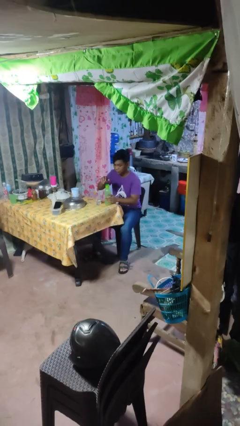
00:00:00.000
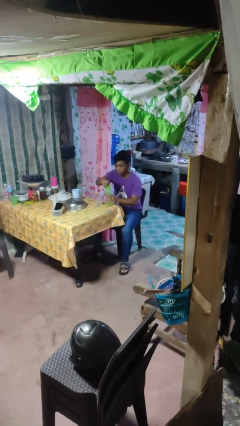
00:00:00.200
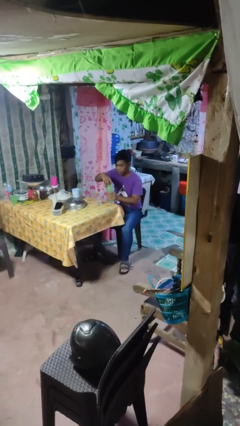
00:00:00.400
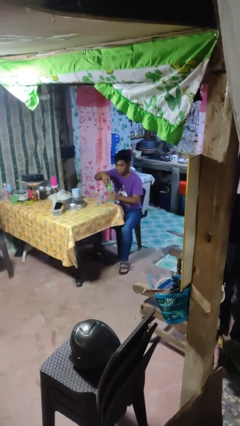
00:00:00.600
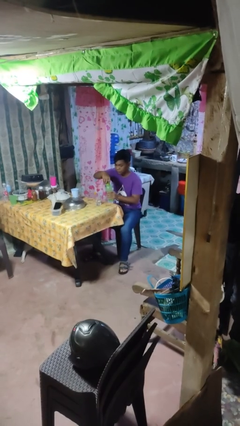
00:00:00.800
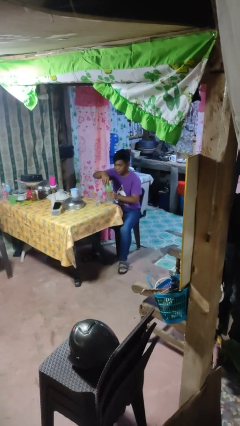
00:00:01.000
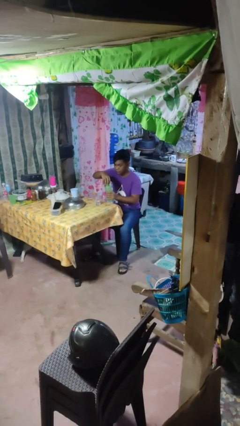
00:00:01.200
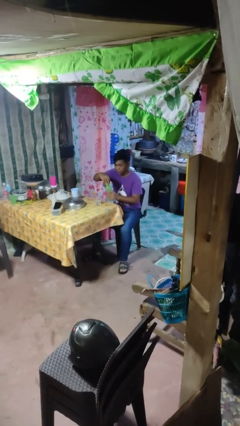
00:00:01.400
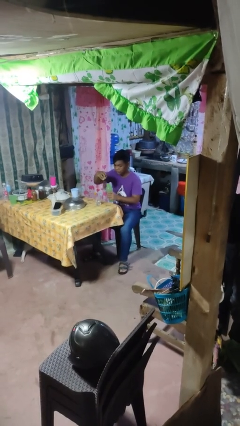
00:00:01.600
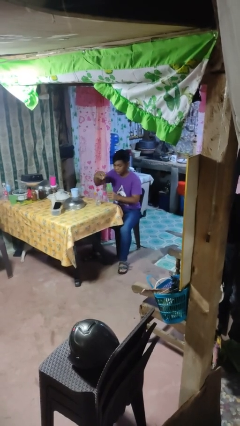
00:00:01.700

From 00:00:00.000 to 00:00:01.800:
person unscrews lid from bottle

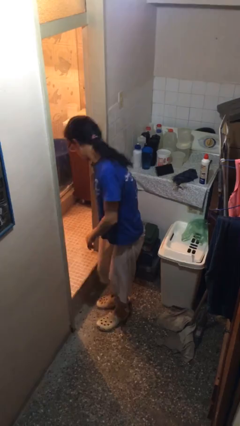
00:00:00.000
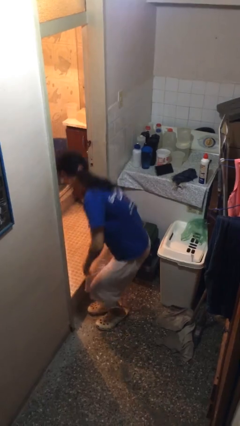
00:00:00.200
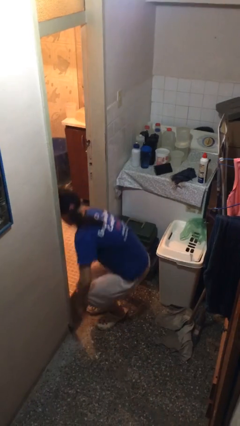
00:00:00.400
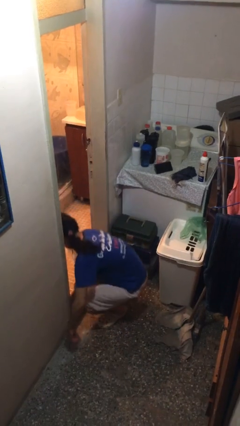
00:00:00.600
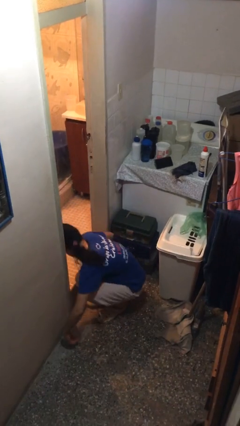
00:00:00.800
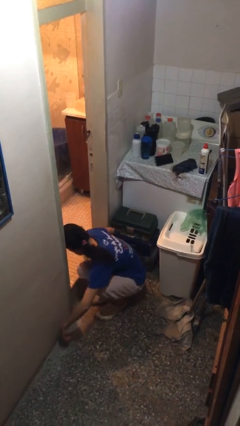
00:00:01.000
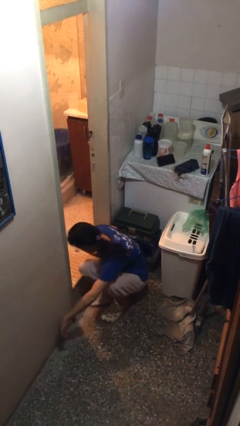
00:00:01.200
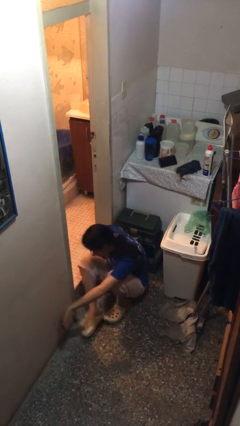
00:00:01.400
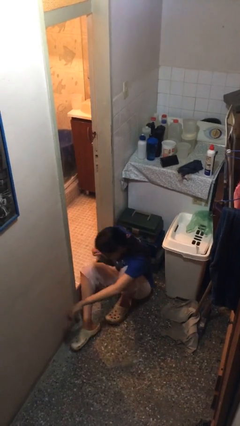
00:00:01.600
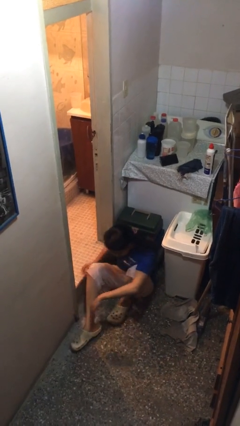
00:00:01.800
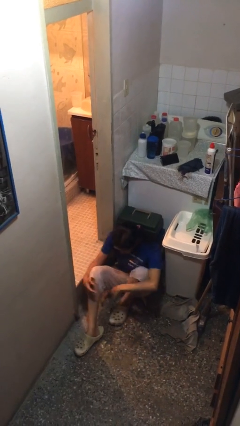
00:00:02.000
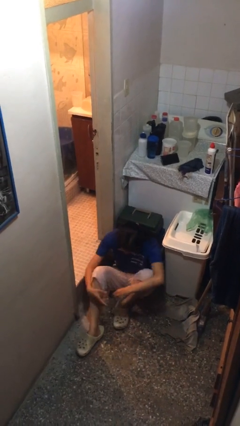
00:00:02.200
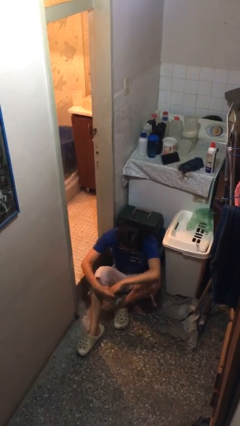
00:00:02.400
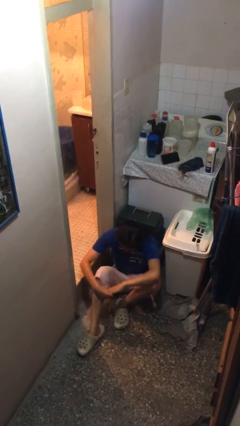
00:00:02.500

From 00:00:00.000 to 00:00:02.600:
person sits down

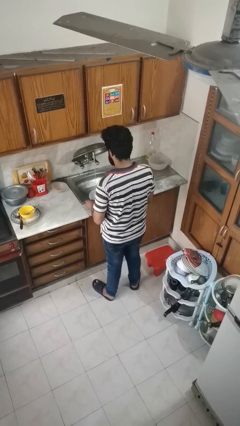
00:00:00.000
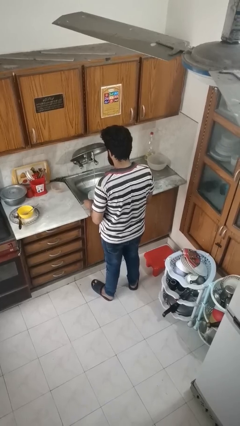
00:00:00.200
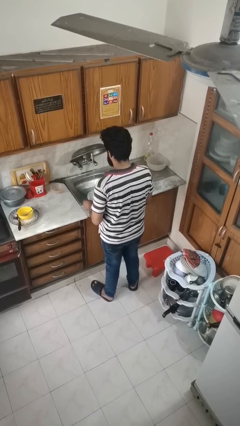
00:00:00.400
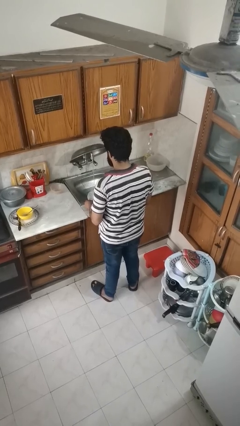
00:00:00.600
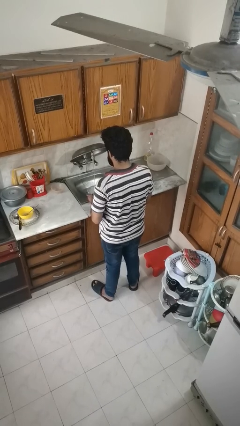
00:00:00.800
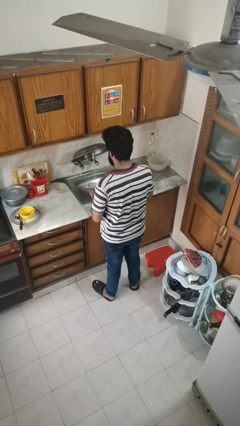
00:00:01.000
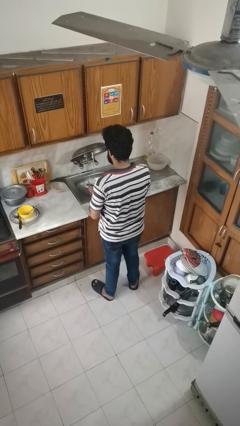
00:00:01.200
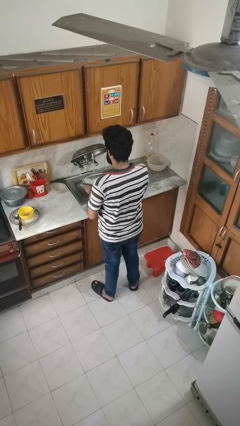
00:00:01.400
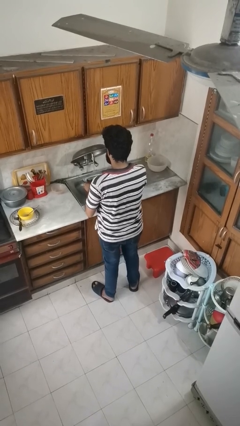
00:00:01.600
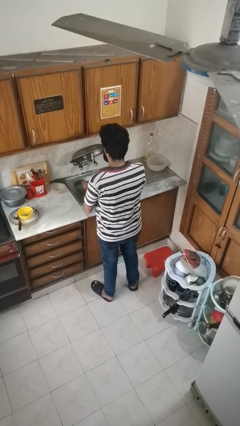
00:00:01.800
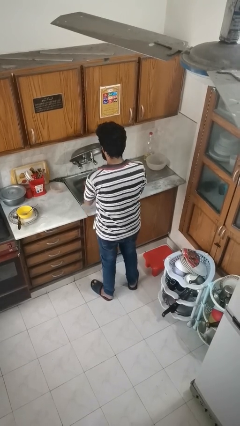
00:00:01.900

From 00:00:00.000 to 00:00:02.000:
person washes dish

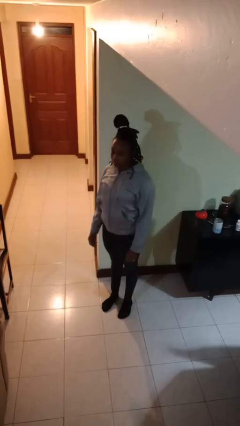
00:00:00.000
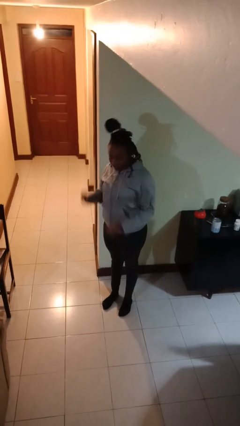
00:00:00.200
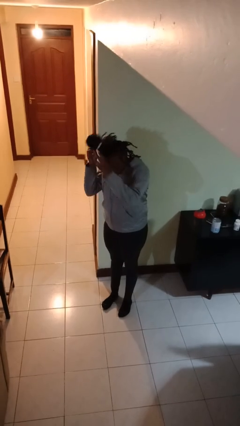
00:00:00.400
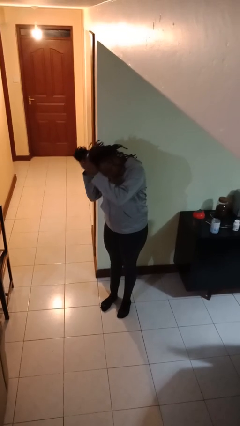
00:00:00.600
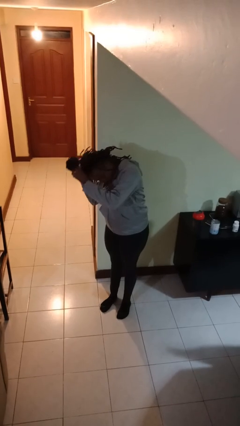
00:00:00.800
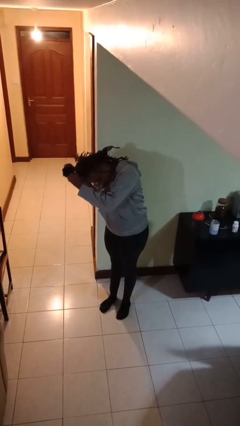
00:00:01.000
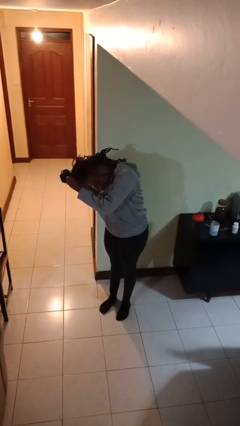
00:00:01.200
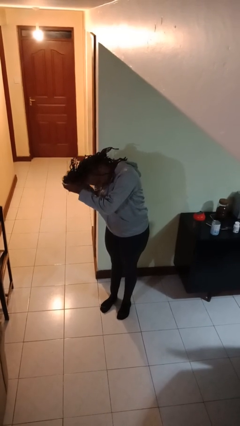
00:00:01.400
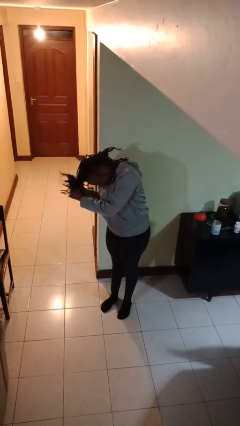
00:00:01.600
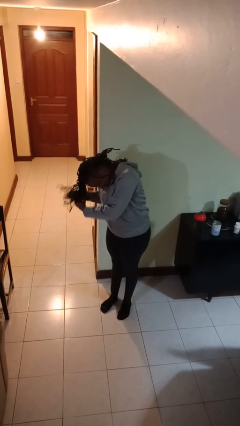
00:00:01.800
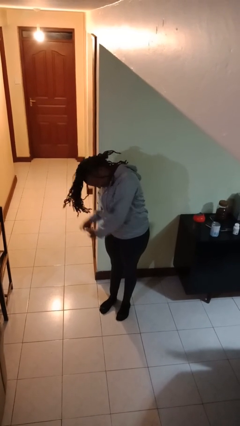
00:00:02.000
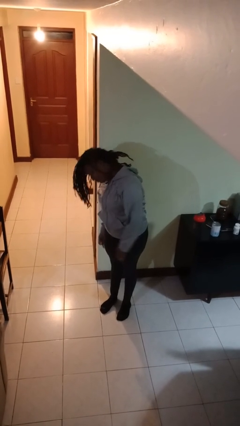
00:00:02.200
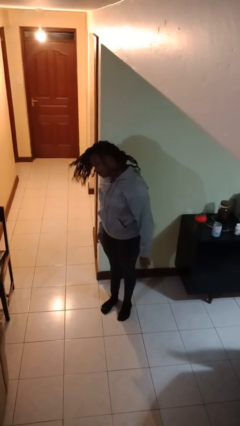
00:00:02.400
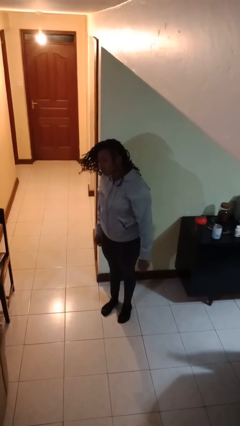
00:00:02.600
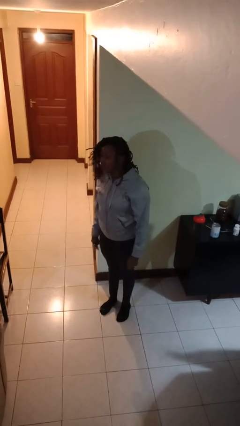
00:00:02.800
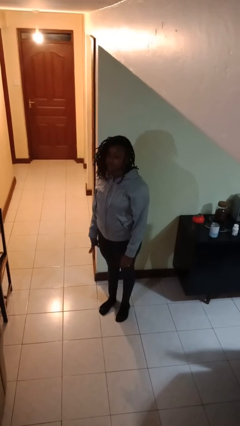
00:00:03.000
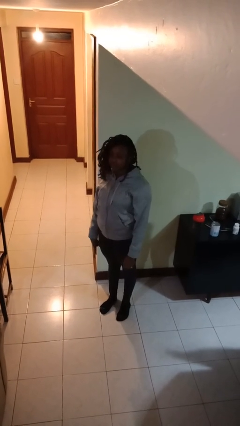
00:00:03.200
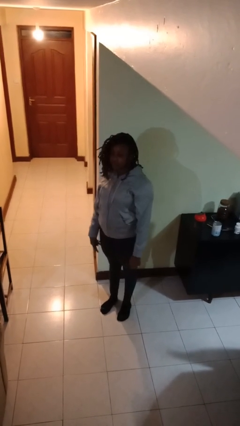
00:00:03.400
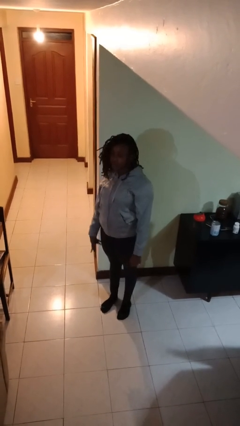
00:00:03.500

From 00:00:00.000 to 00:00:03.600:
person takes off hairtie

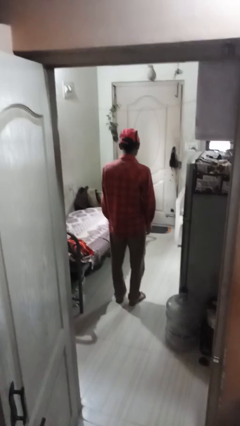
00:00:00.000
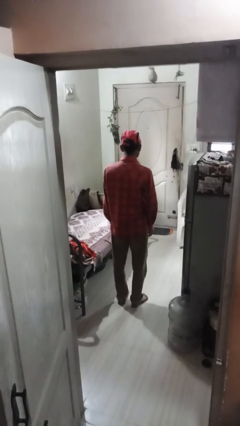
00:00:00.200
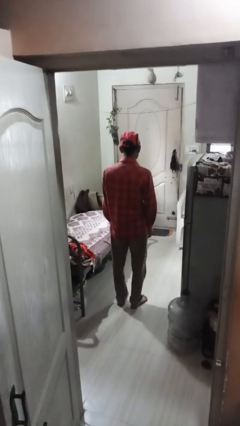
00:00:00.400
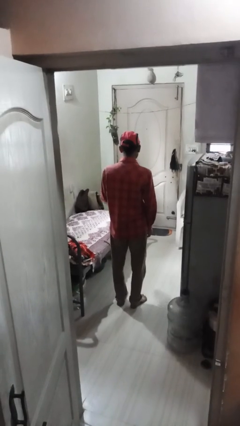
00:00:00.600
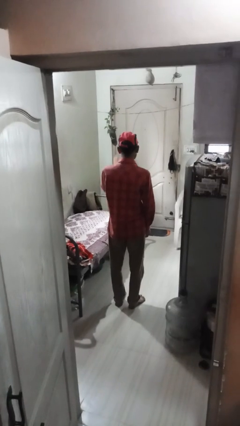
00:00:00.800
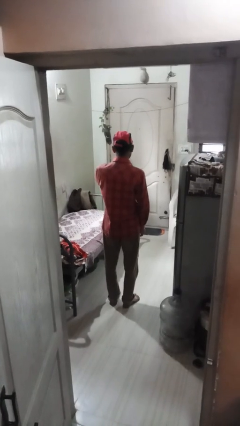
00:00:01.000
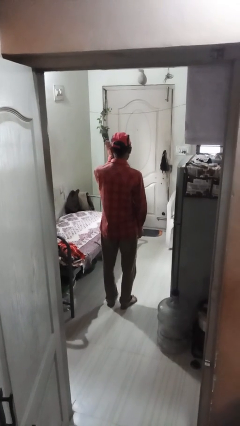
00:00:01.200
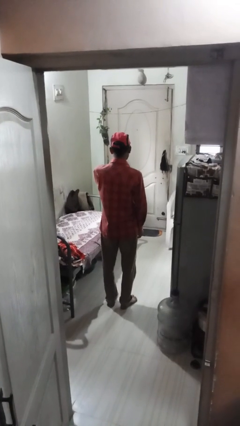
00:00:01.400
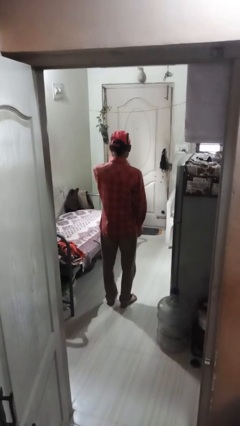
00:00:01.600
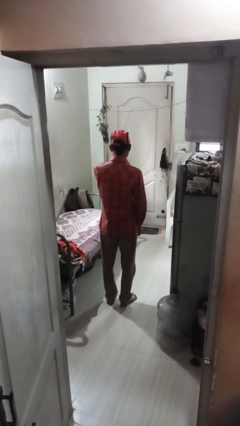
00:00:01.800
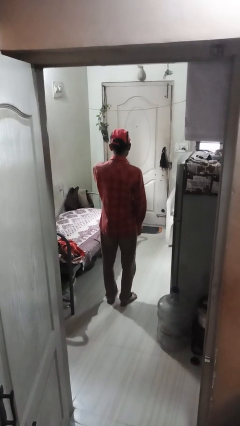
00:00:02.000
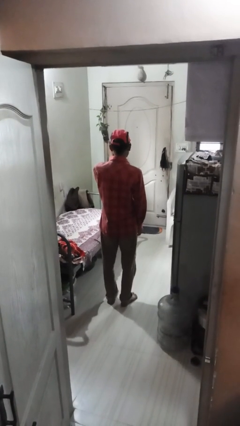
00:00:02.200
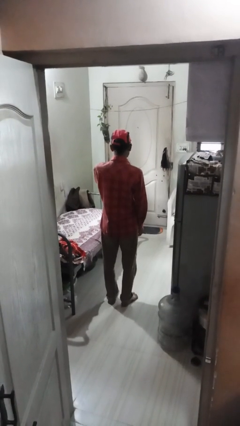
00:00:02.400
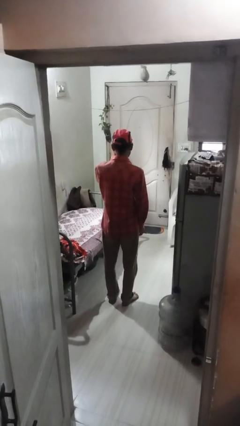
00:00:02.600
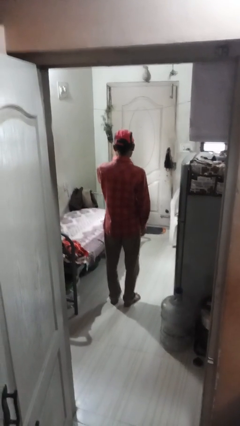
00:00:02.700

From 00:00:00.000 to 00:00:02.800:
person waves at person

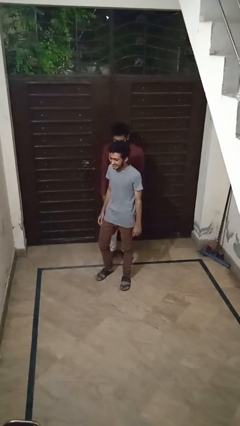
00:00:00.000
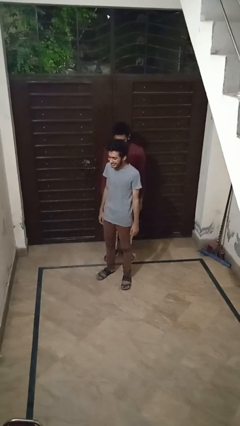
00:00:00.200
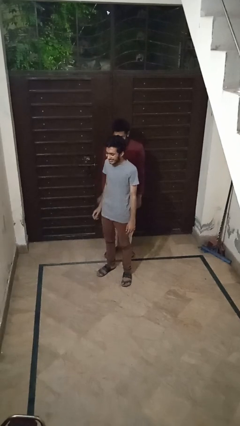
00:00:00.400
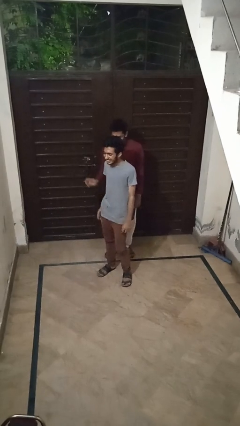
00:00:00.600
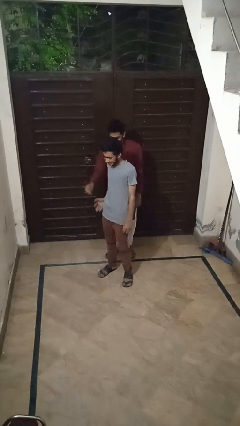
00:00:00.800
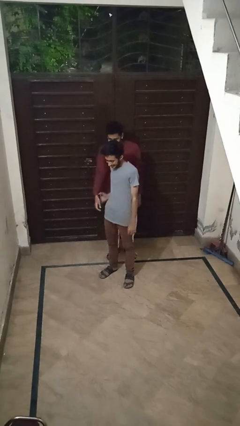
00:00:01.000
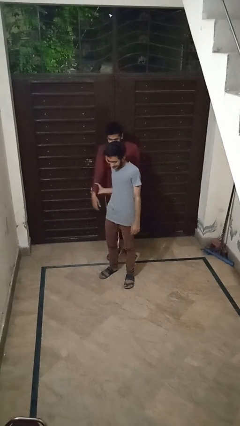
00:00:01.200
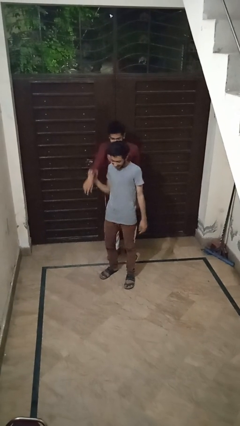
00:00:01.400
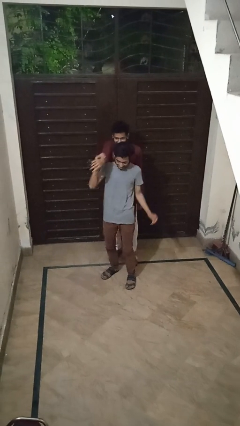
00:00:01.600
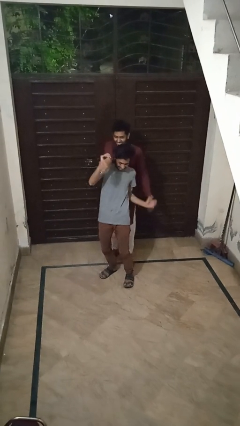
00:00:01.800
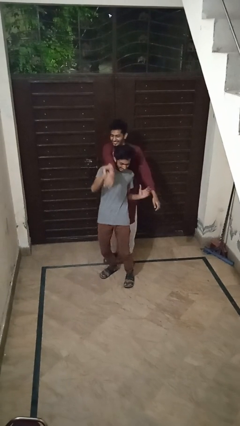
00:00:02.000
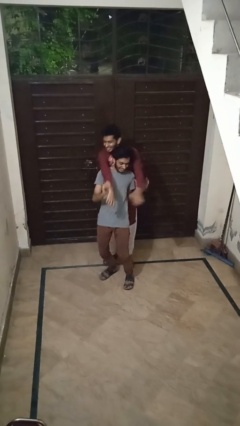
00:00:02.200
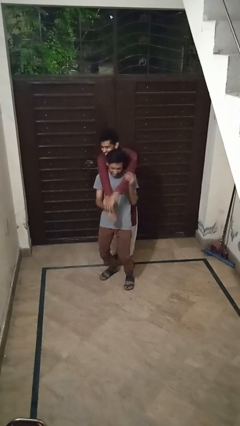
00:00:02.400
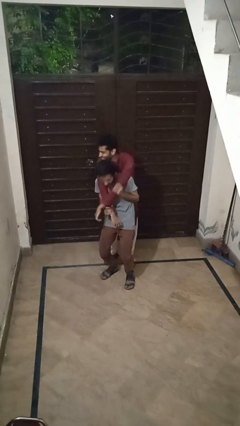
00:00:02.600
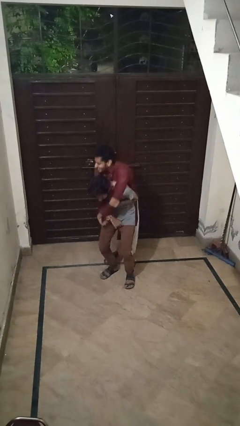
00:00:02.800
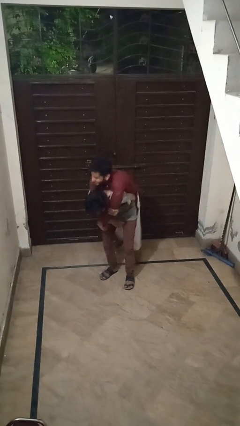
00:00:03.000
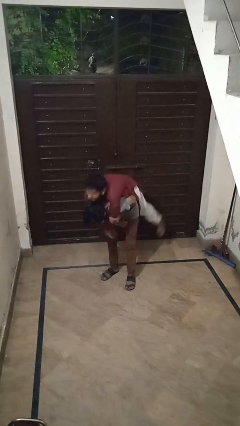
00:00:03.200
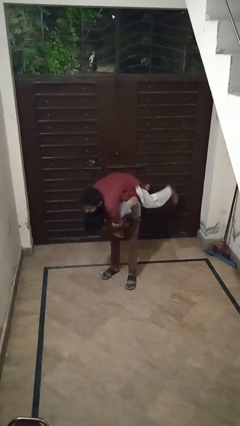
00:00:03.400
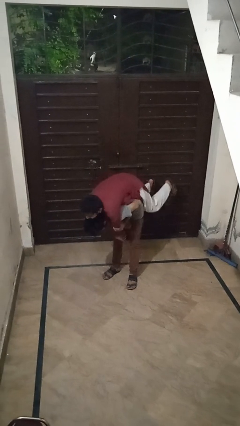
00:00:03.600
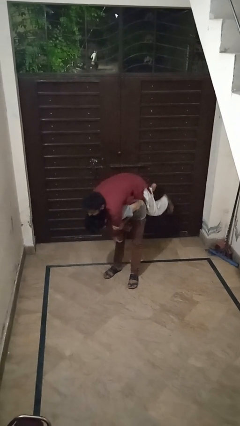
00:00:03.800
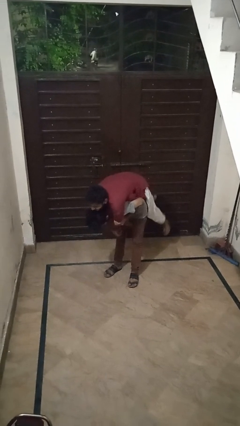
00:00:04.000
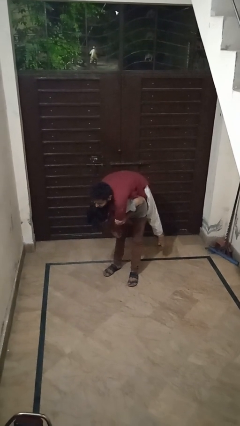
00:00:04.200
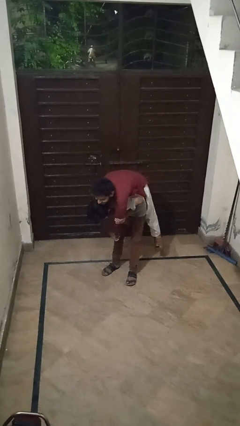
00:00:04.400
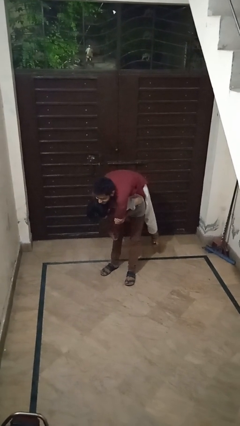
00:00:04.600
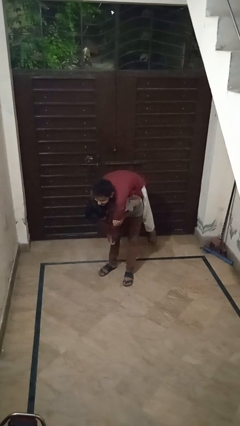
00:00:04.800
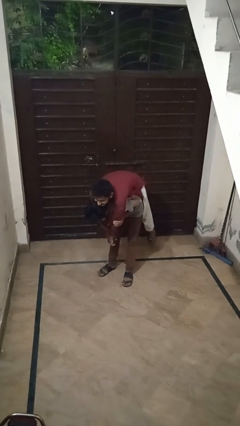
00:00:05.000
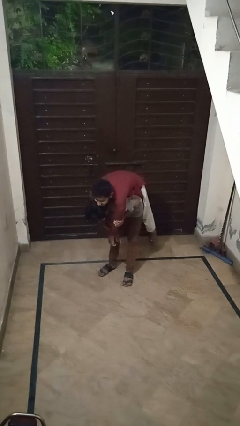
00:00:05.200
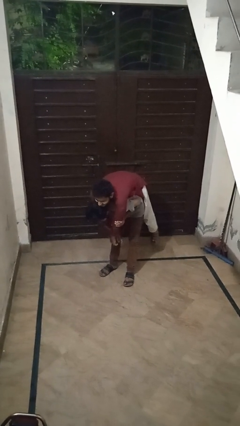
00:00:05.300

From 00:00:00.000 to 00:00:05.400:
person carries person over shoulder
